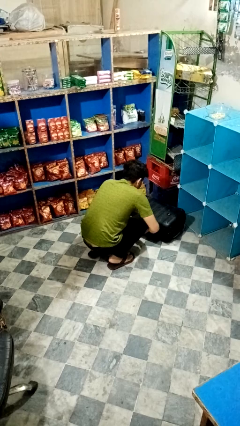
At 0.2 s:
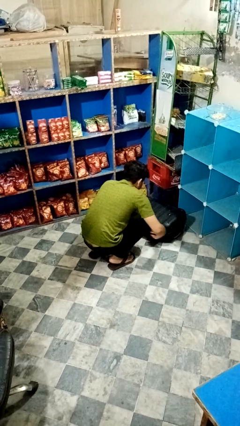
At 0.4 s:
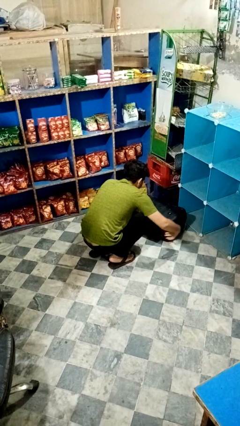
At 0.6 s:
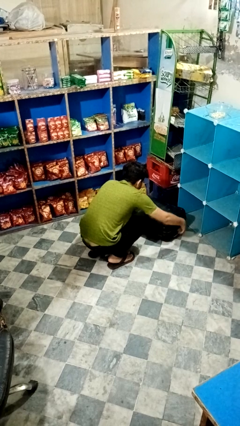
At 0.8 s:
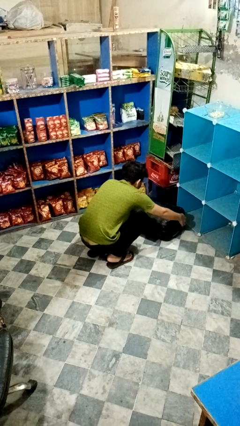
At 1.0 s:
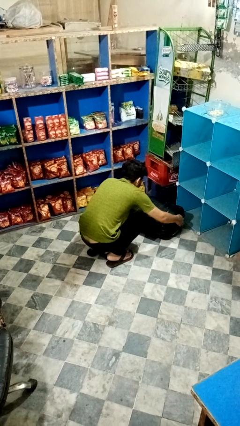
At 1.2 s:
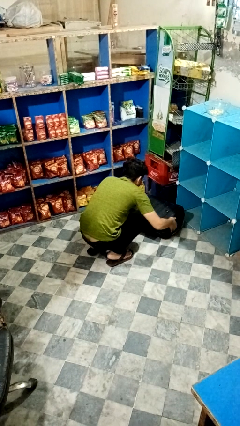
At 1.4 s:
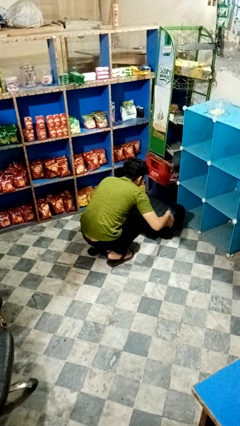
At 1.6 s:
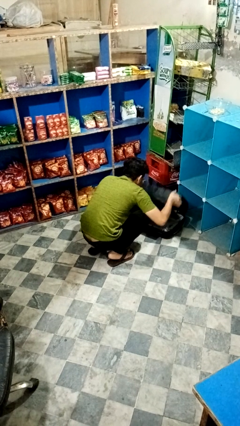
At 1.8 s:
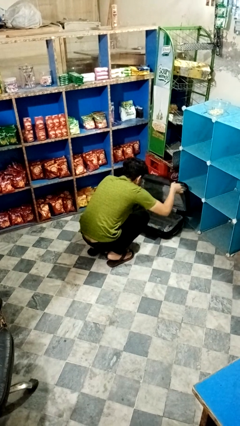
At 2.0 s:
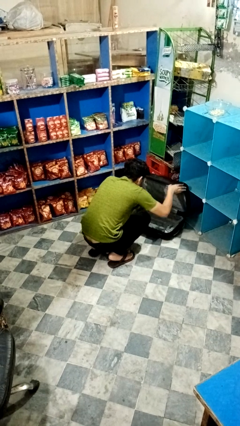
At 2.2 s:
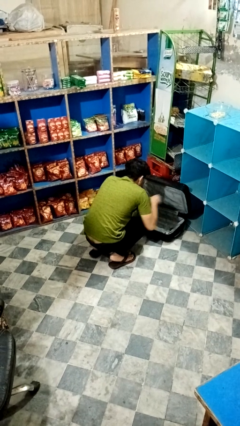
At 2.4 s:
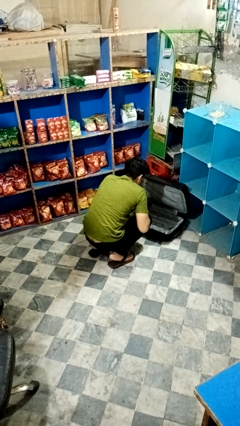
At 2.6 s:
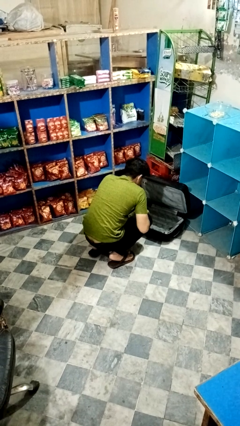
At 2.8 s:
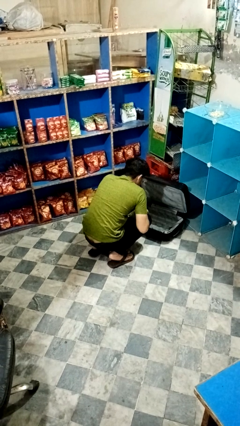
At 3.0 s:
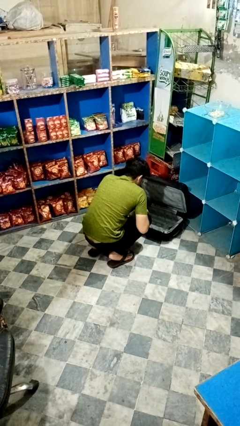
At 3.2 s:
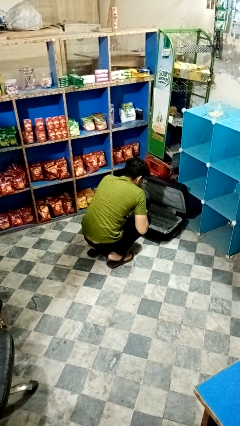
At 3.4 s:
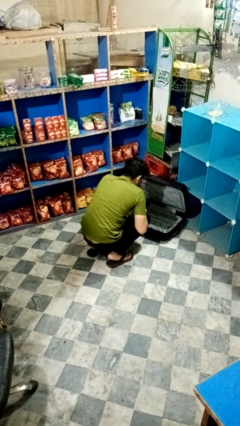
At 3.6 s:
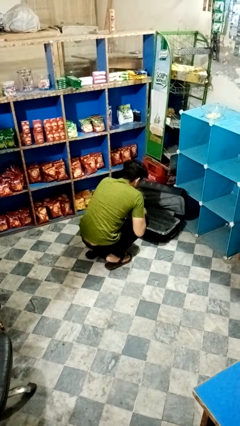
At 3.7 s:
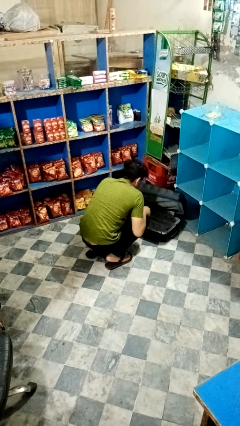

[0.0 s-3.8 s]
person opens suitcase

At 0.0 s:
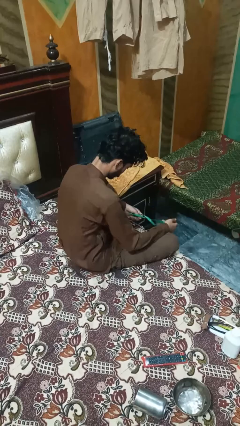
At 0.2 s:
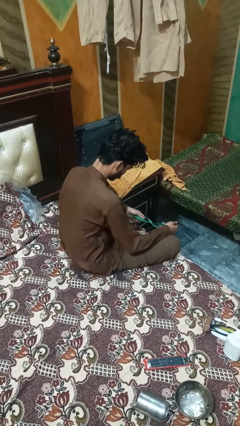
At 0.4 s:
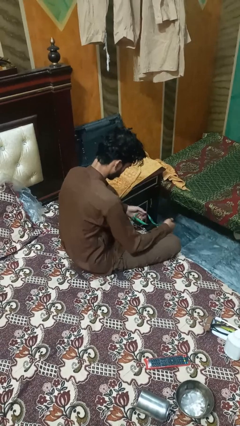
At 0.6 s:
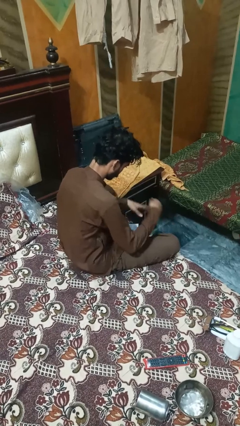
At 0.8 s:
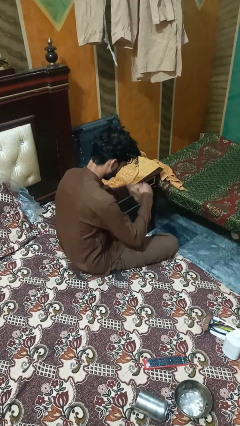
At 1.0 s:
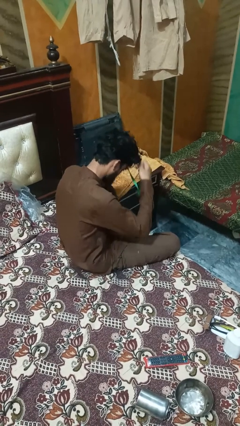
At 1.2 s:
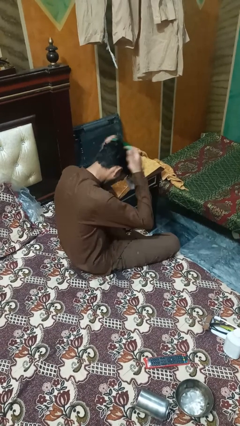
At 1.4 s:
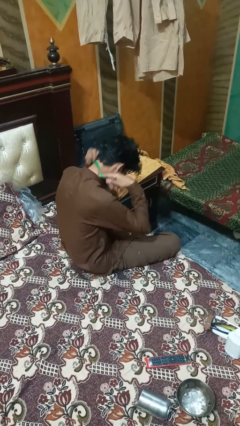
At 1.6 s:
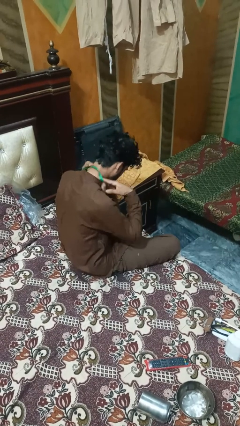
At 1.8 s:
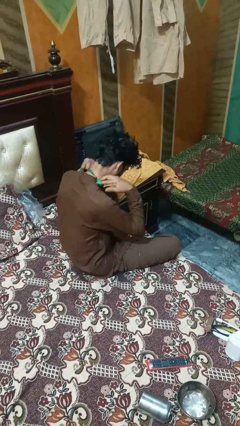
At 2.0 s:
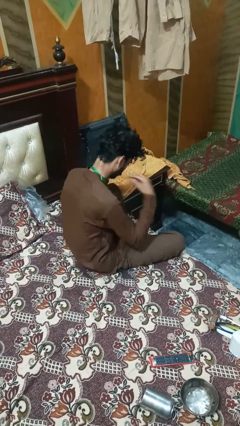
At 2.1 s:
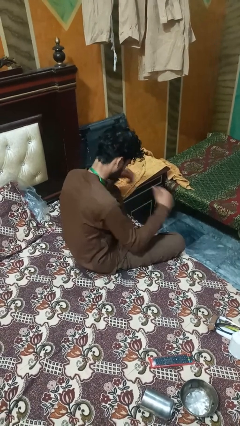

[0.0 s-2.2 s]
person puts on necklace

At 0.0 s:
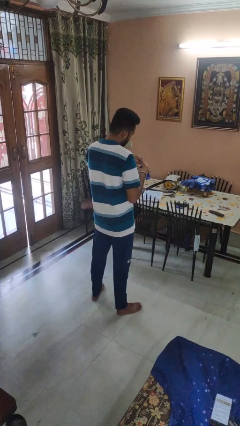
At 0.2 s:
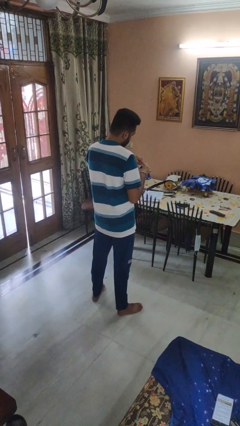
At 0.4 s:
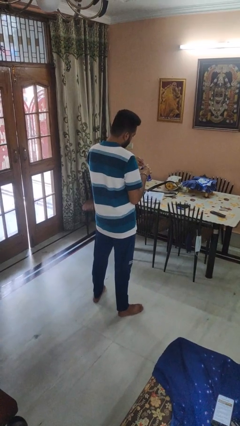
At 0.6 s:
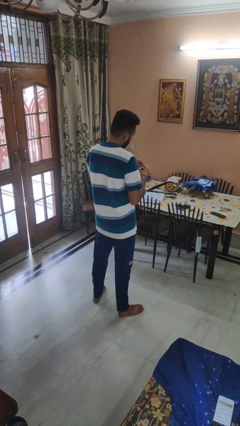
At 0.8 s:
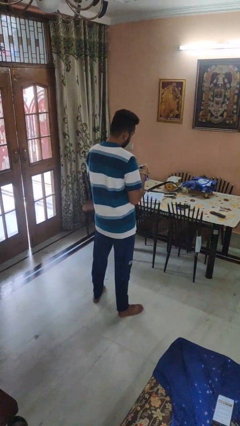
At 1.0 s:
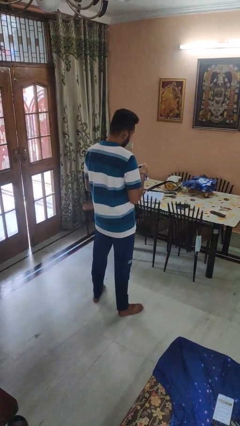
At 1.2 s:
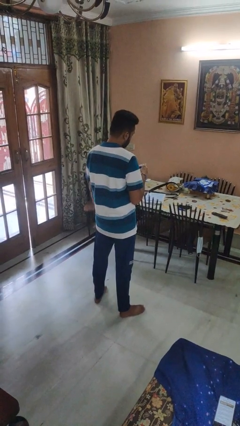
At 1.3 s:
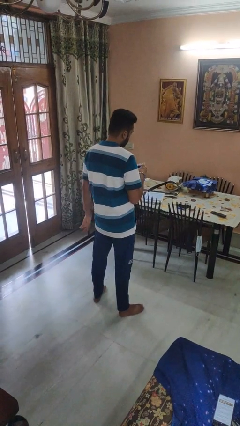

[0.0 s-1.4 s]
person opens beverage can

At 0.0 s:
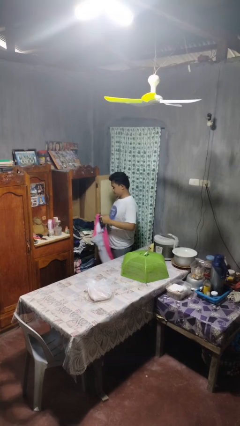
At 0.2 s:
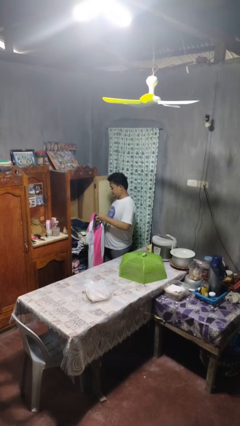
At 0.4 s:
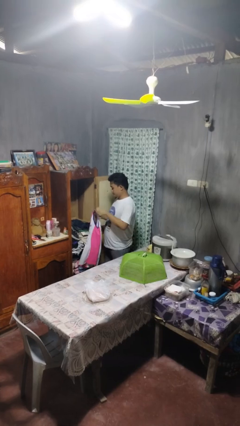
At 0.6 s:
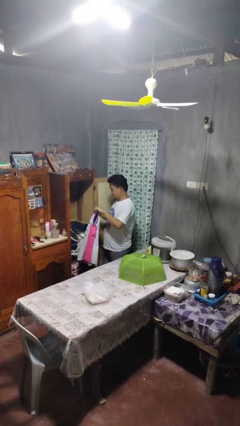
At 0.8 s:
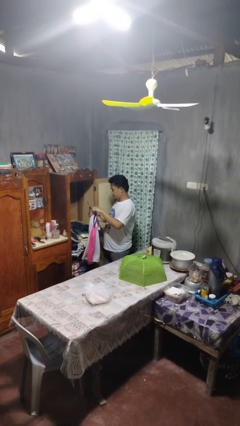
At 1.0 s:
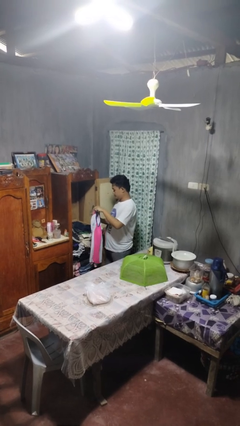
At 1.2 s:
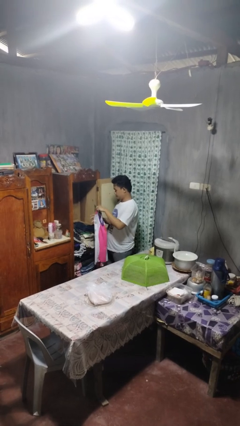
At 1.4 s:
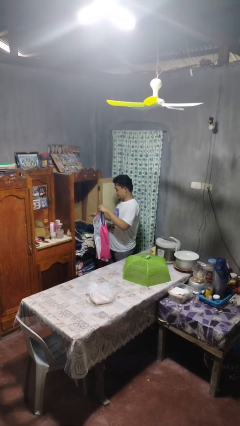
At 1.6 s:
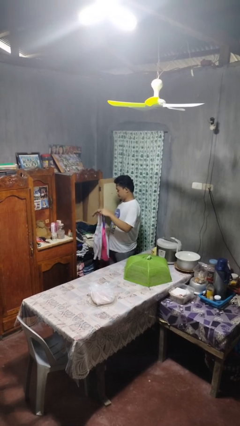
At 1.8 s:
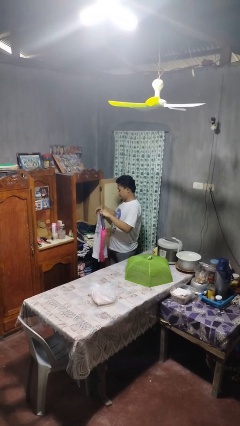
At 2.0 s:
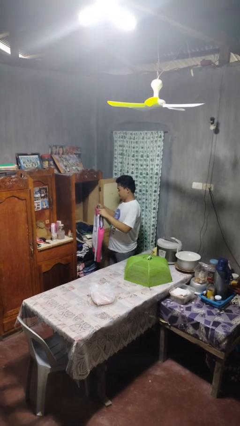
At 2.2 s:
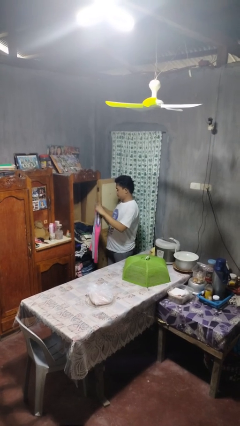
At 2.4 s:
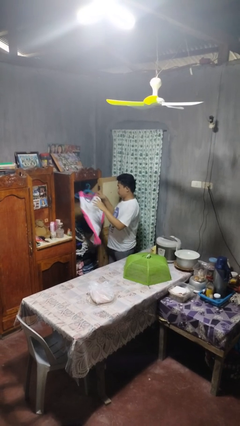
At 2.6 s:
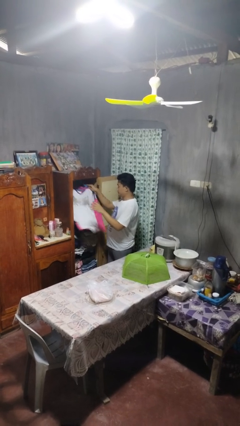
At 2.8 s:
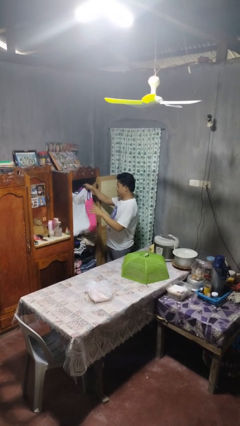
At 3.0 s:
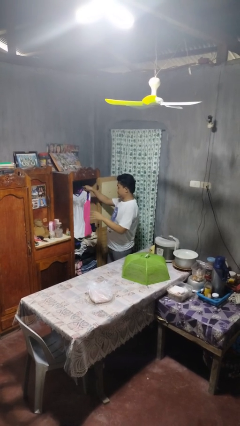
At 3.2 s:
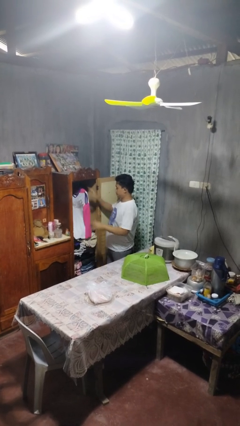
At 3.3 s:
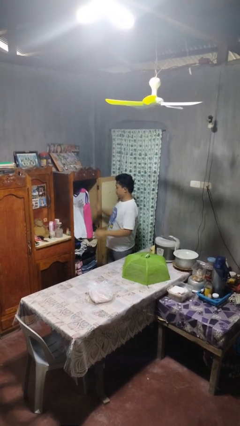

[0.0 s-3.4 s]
person puts clothes into closet

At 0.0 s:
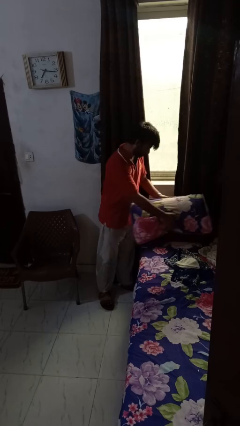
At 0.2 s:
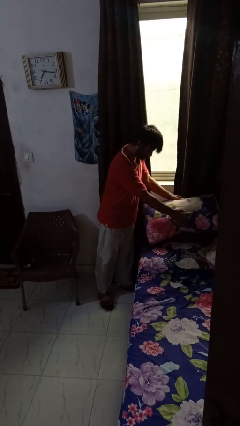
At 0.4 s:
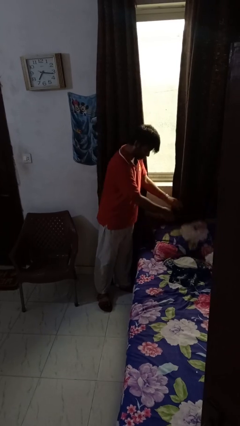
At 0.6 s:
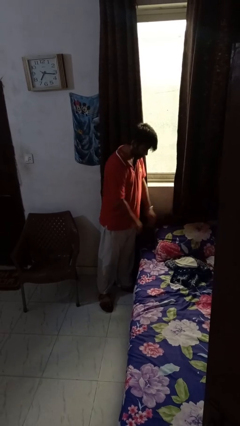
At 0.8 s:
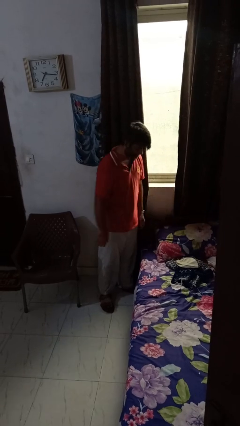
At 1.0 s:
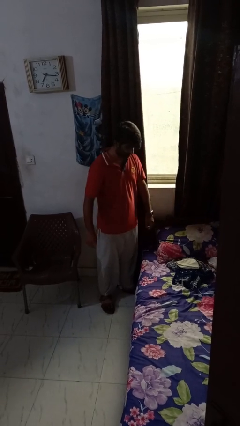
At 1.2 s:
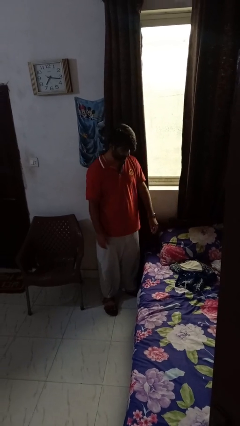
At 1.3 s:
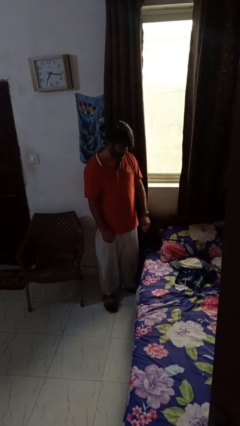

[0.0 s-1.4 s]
person puts down object on bed

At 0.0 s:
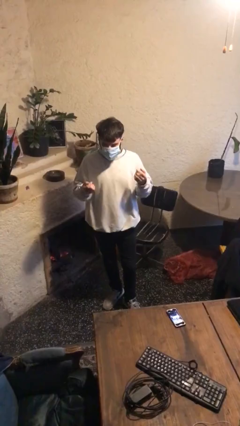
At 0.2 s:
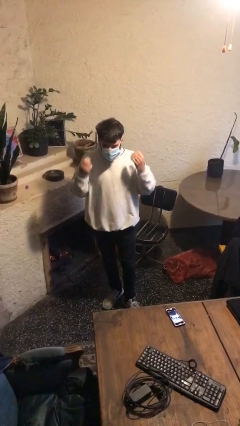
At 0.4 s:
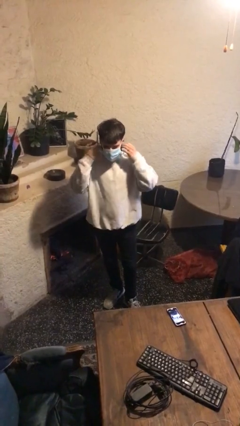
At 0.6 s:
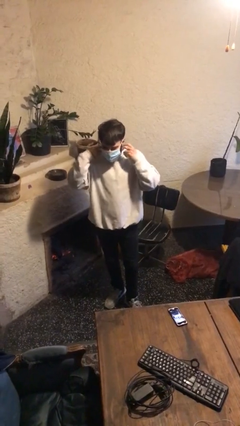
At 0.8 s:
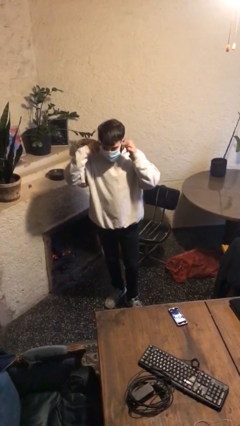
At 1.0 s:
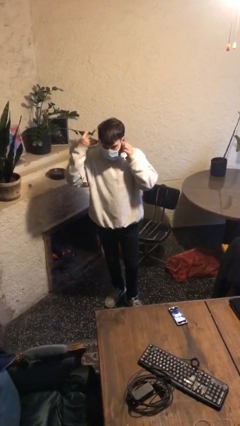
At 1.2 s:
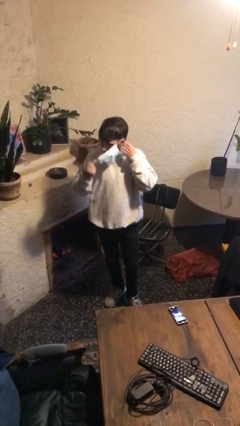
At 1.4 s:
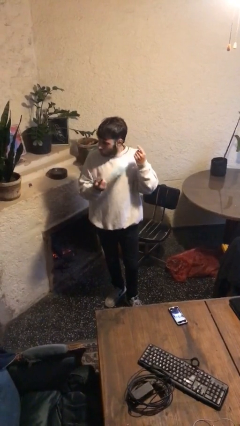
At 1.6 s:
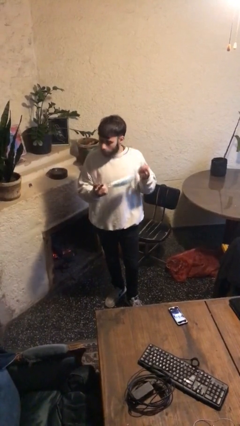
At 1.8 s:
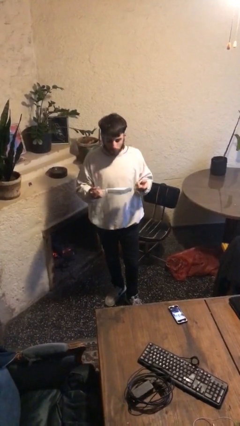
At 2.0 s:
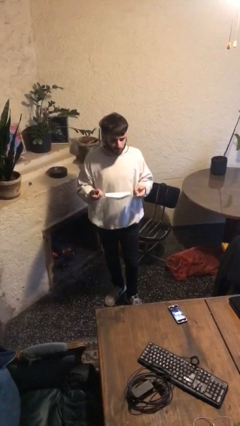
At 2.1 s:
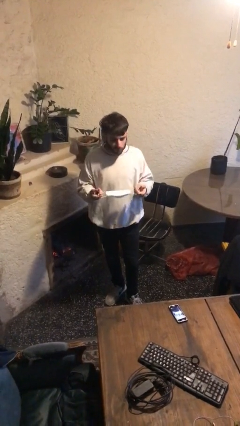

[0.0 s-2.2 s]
person takes off facemask

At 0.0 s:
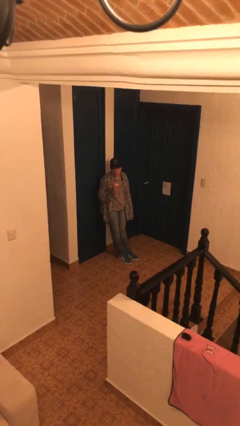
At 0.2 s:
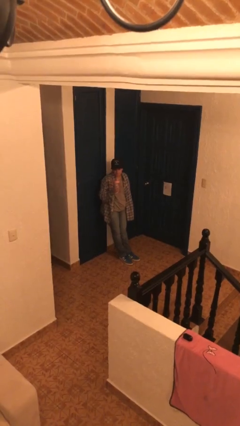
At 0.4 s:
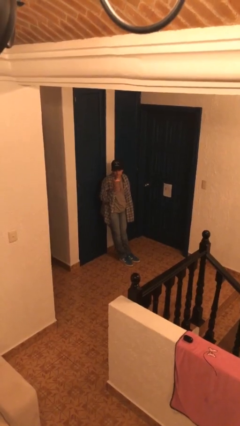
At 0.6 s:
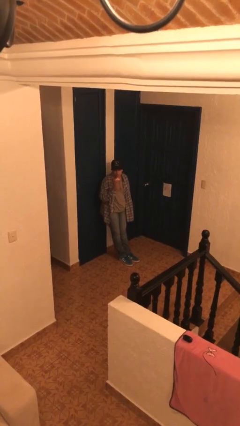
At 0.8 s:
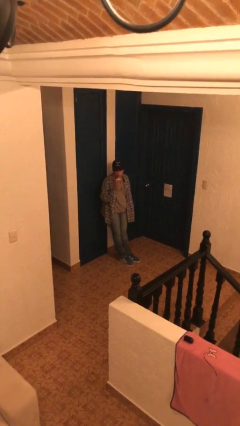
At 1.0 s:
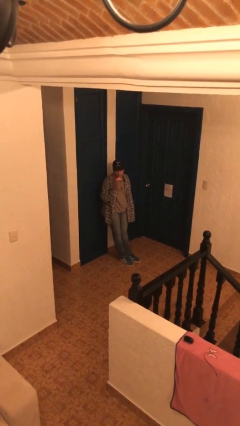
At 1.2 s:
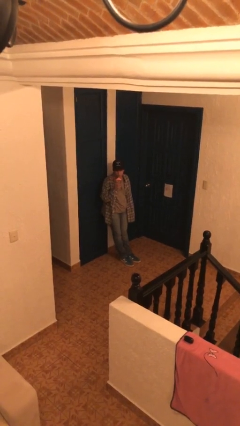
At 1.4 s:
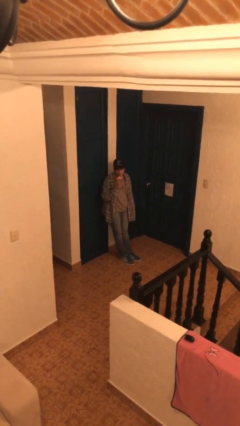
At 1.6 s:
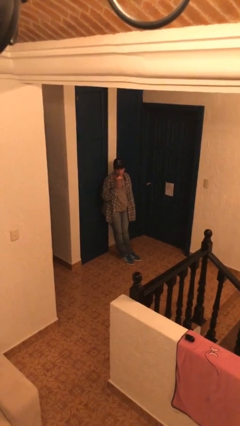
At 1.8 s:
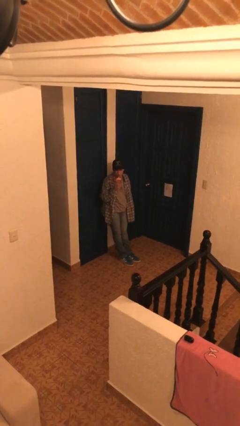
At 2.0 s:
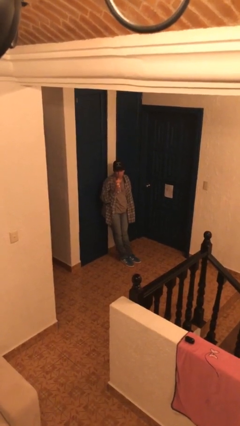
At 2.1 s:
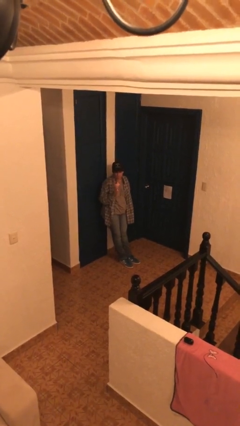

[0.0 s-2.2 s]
person drinks from straw

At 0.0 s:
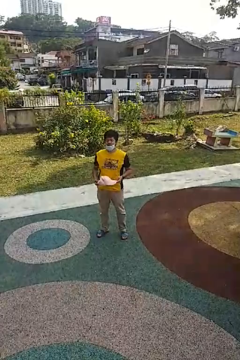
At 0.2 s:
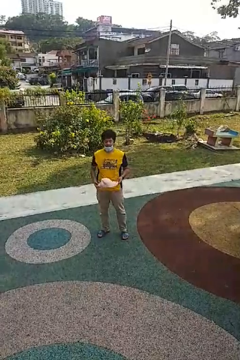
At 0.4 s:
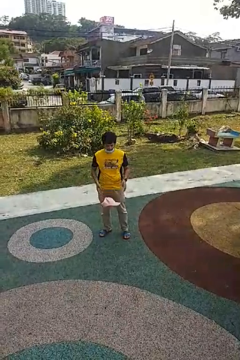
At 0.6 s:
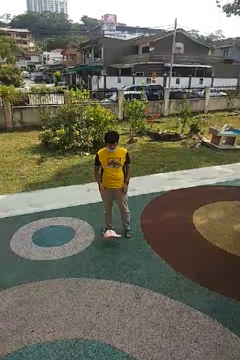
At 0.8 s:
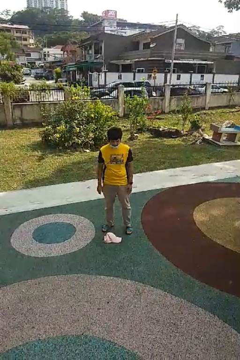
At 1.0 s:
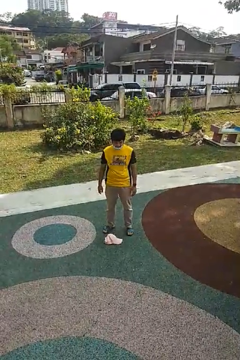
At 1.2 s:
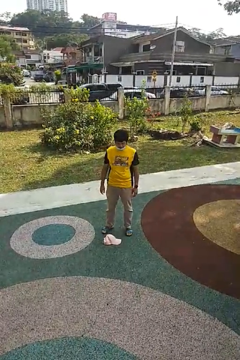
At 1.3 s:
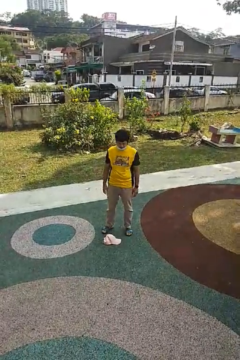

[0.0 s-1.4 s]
person drops object
